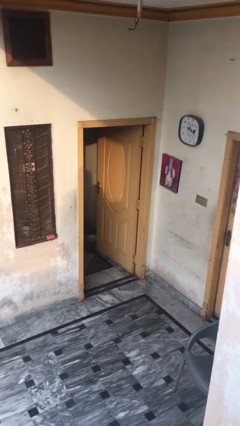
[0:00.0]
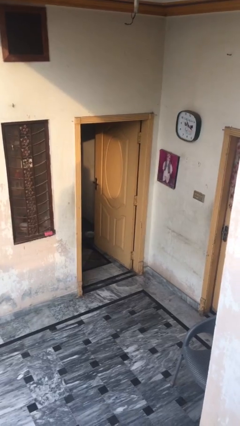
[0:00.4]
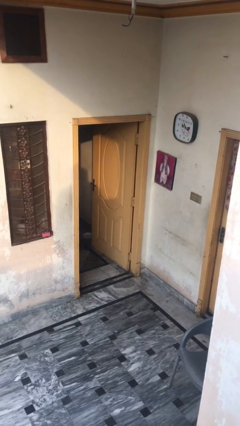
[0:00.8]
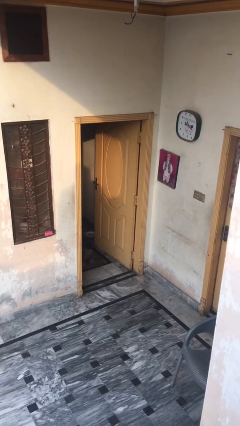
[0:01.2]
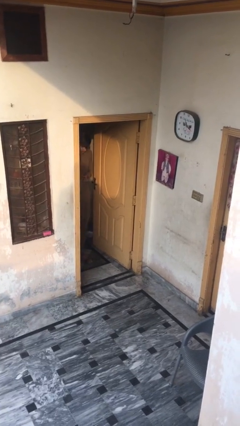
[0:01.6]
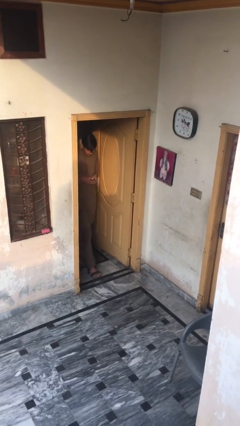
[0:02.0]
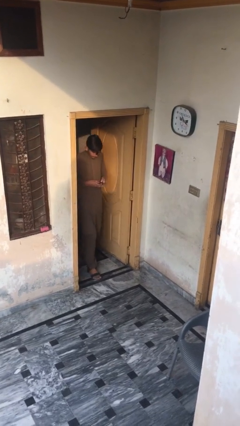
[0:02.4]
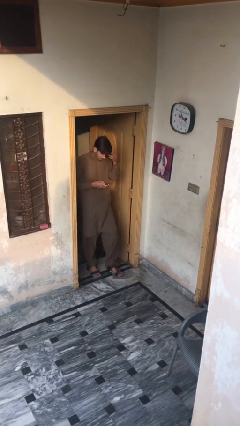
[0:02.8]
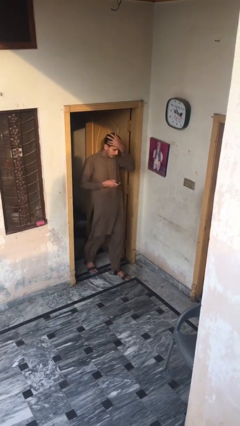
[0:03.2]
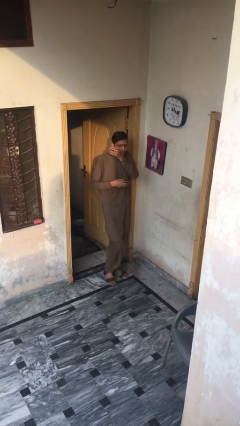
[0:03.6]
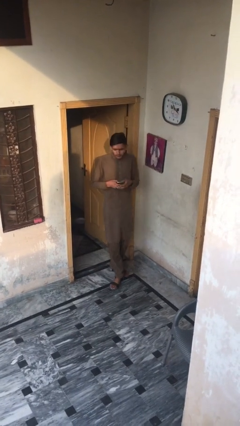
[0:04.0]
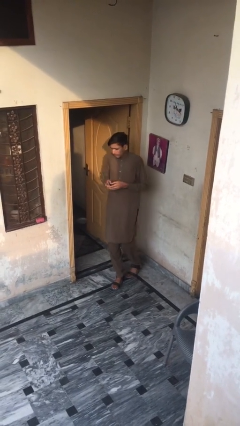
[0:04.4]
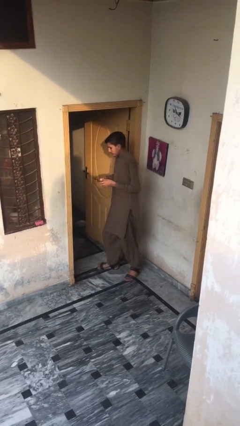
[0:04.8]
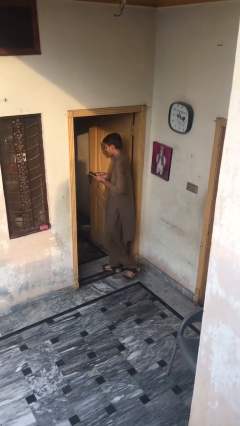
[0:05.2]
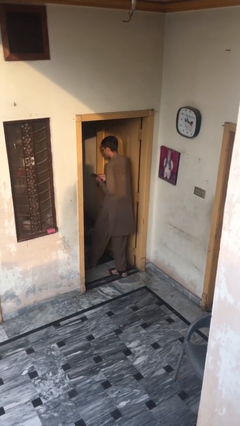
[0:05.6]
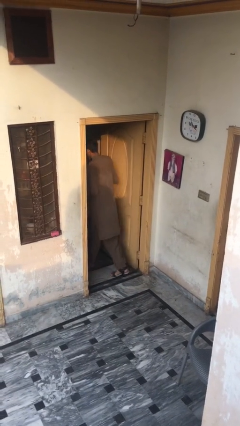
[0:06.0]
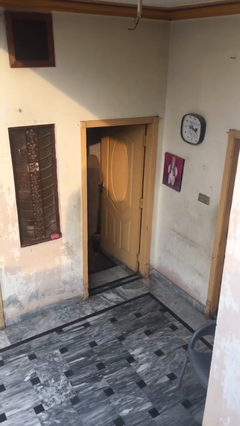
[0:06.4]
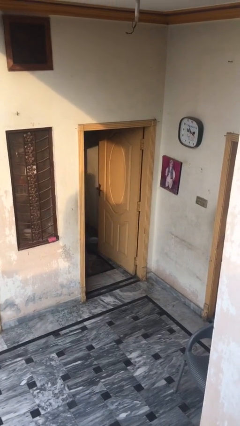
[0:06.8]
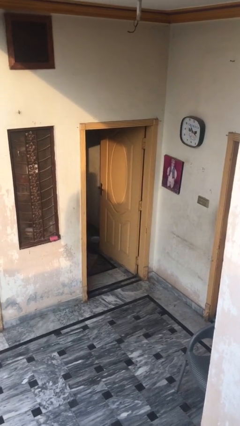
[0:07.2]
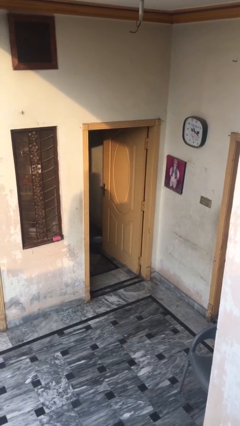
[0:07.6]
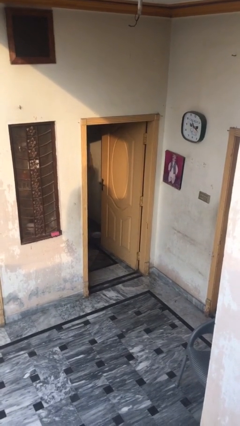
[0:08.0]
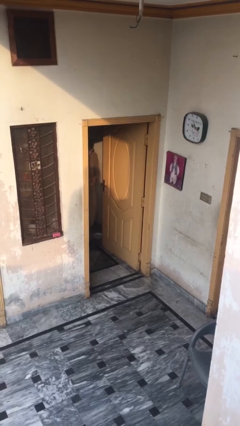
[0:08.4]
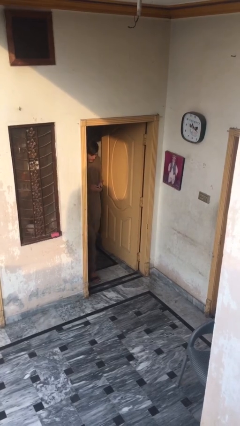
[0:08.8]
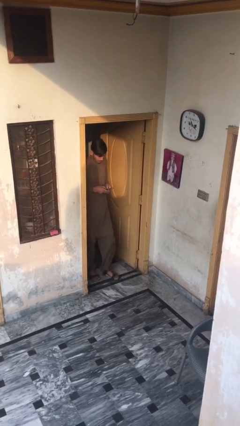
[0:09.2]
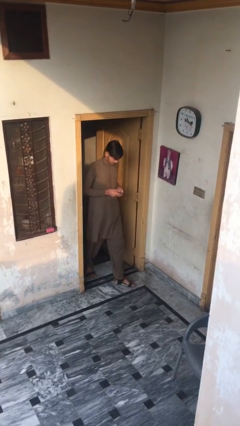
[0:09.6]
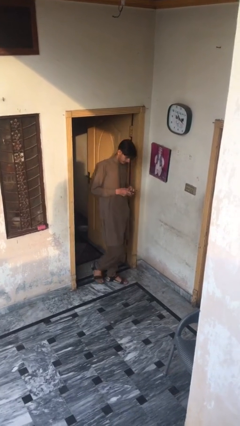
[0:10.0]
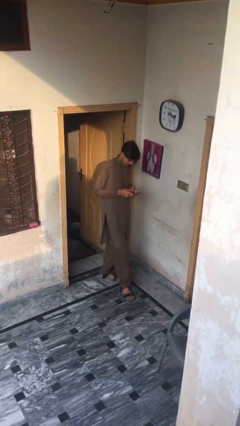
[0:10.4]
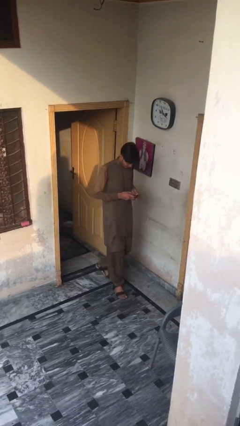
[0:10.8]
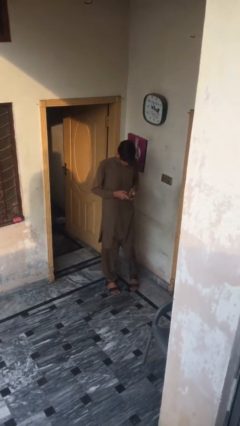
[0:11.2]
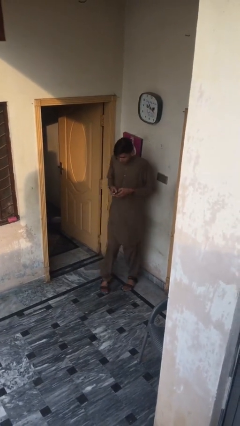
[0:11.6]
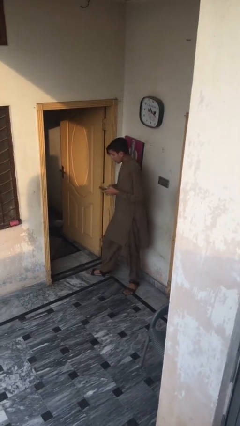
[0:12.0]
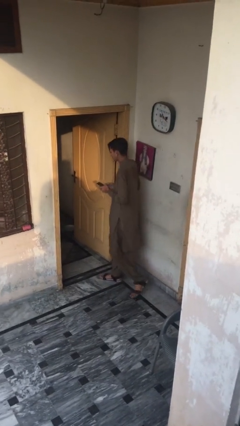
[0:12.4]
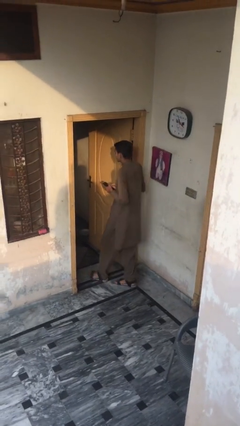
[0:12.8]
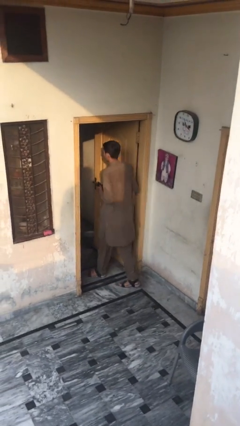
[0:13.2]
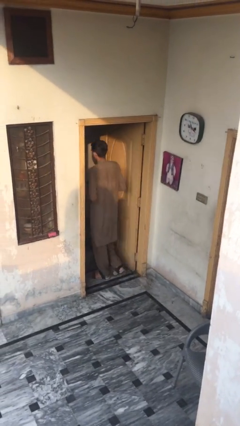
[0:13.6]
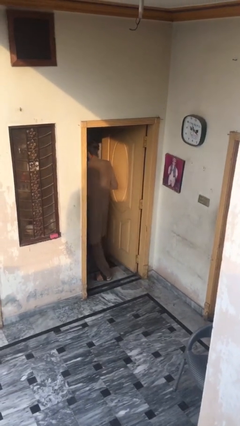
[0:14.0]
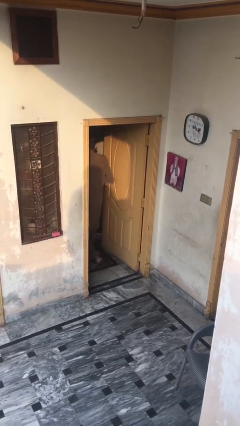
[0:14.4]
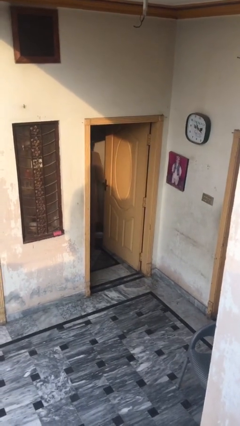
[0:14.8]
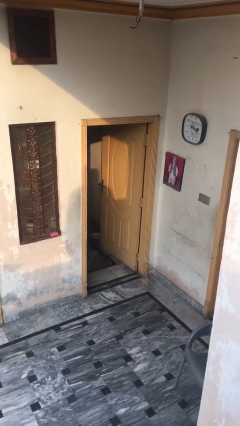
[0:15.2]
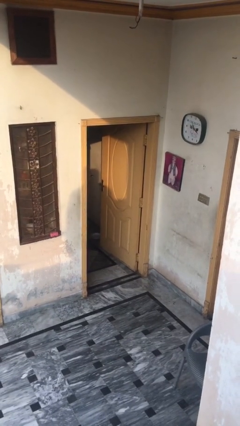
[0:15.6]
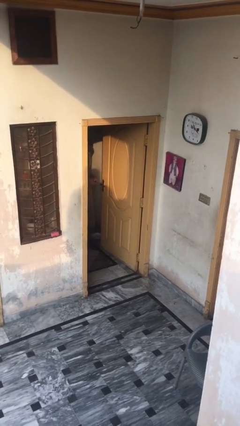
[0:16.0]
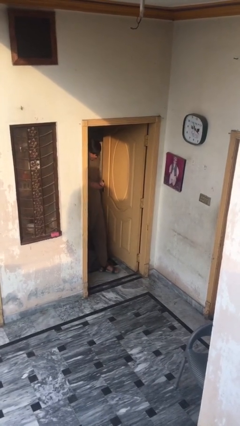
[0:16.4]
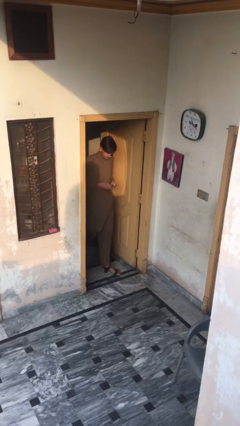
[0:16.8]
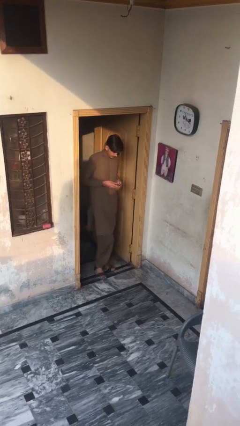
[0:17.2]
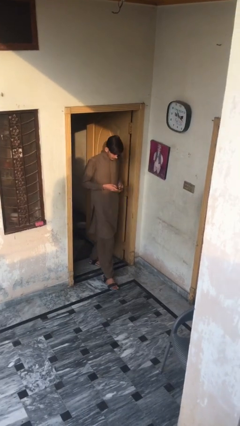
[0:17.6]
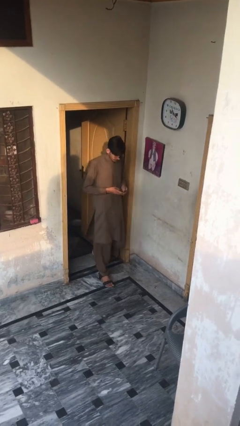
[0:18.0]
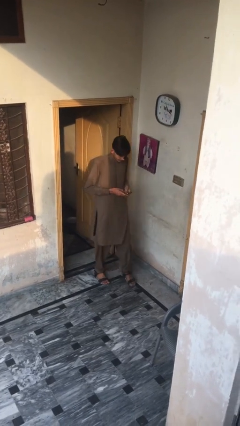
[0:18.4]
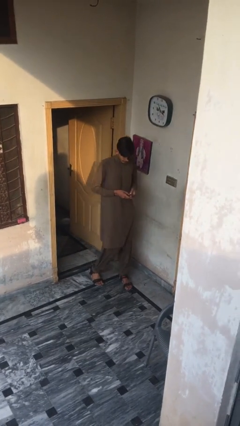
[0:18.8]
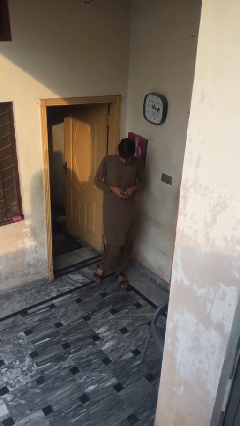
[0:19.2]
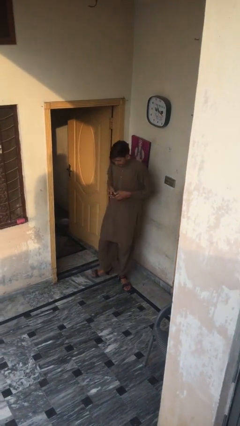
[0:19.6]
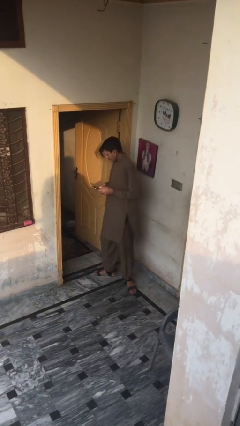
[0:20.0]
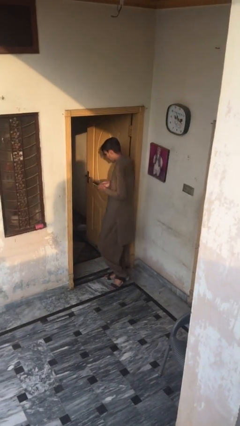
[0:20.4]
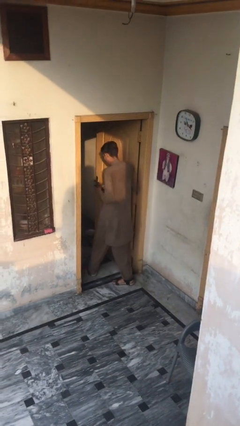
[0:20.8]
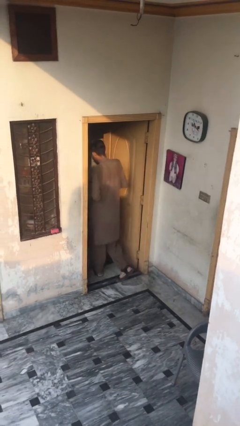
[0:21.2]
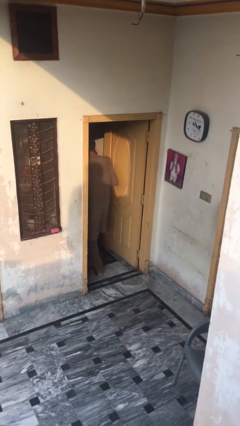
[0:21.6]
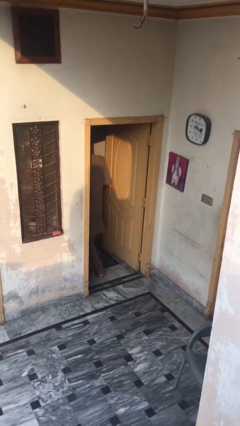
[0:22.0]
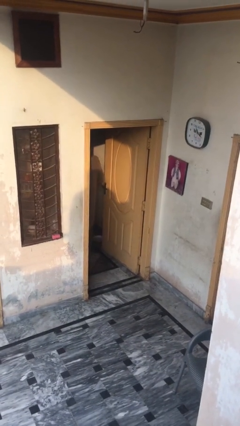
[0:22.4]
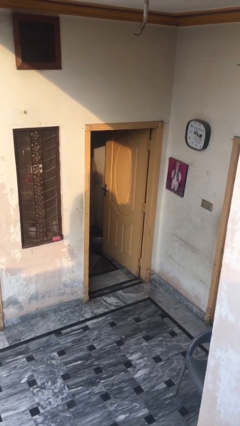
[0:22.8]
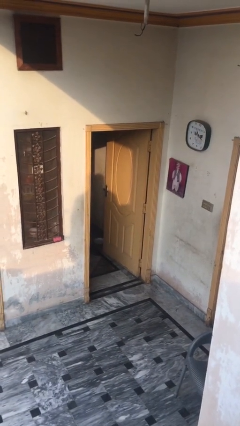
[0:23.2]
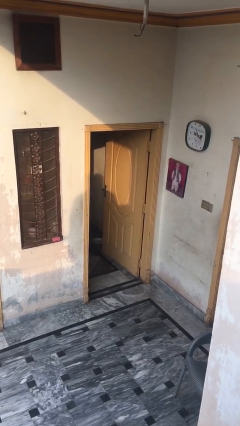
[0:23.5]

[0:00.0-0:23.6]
person texts on phone

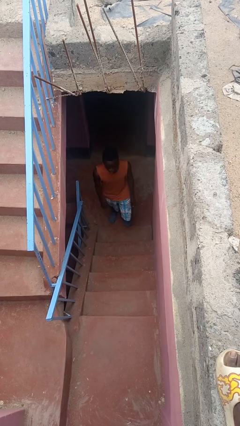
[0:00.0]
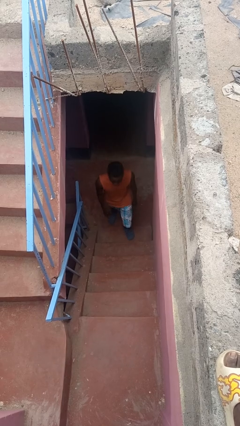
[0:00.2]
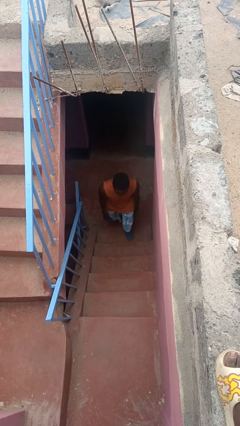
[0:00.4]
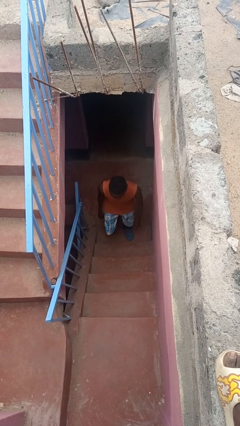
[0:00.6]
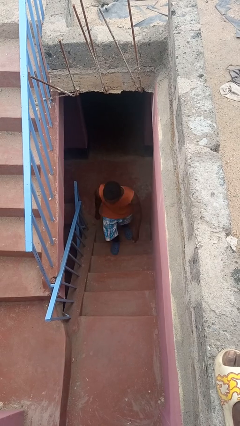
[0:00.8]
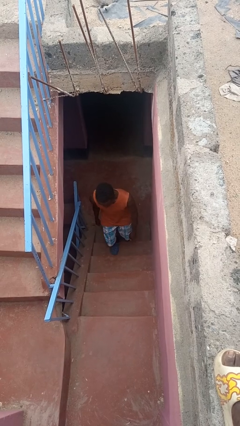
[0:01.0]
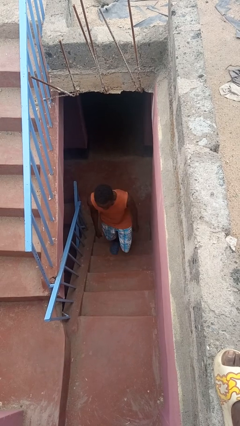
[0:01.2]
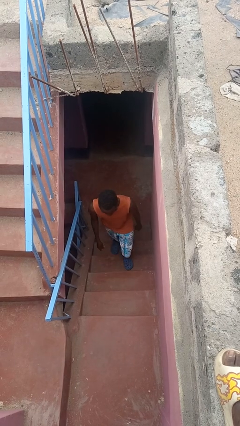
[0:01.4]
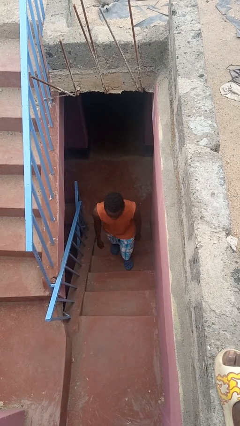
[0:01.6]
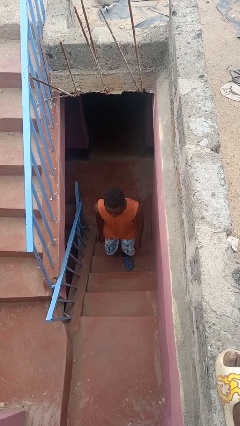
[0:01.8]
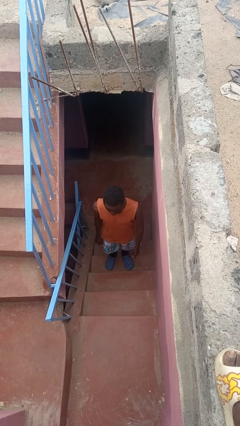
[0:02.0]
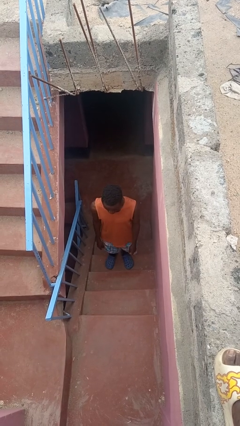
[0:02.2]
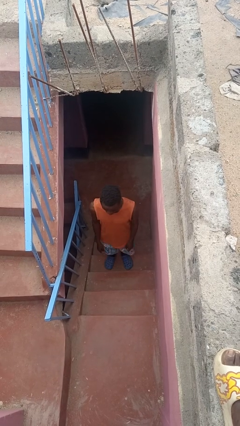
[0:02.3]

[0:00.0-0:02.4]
person climbs up stairs

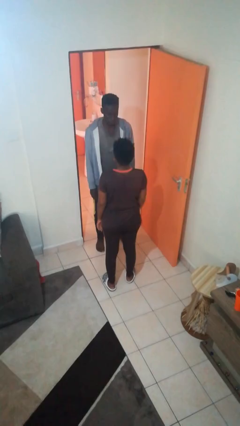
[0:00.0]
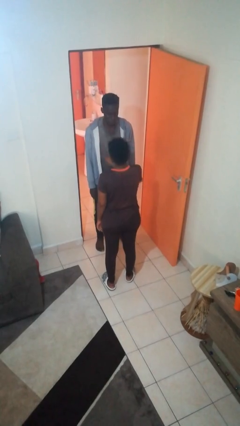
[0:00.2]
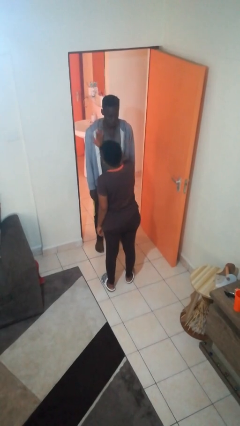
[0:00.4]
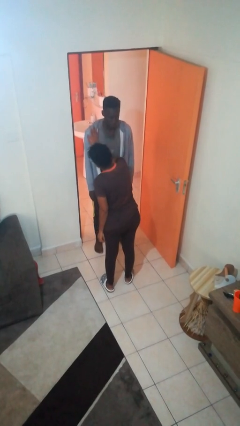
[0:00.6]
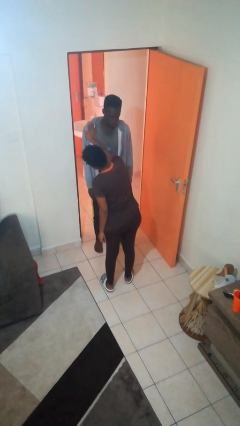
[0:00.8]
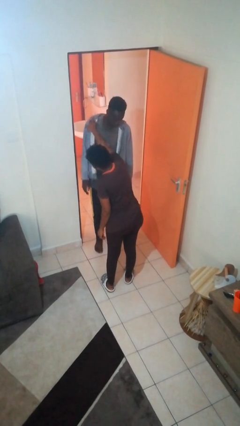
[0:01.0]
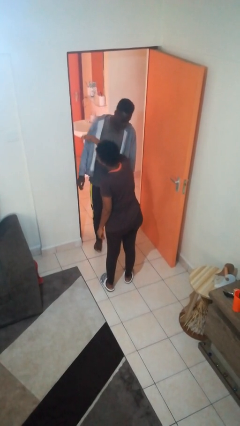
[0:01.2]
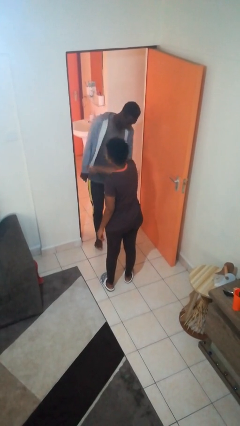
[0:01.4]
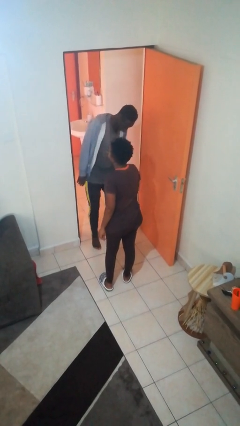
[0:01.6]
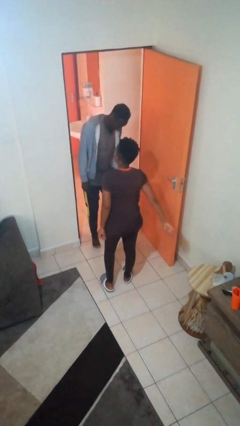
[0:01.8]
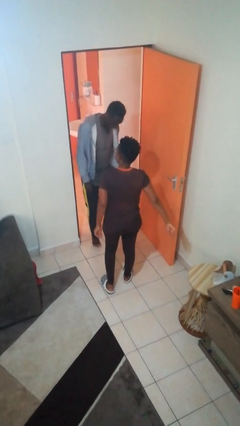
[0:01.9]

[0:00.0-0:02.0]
person shoves person

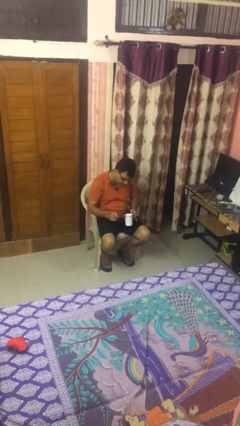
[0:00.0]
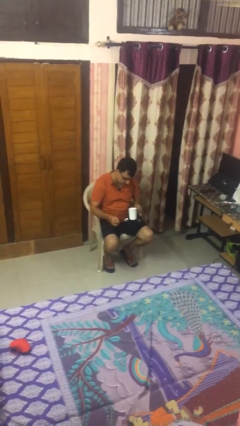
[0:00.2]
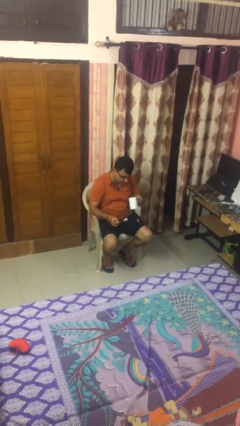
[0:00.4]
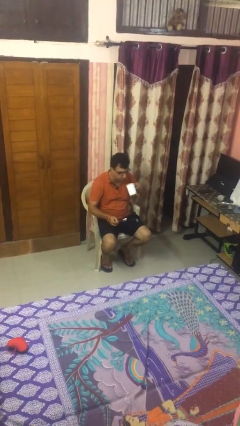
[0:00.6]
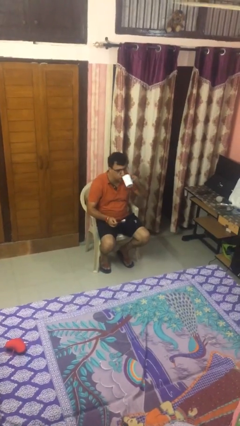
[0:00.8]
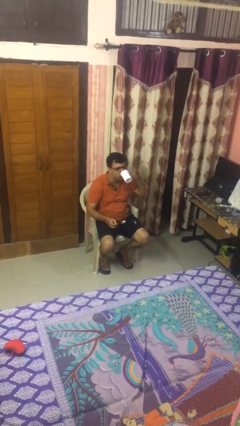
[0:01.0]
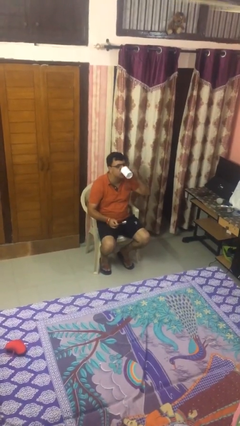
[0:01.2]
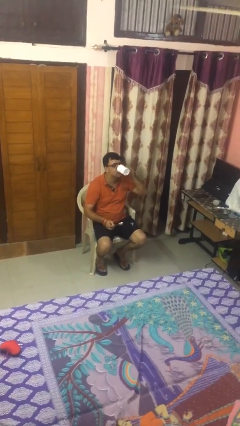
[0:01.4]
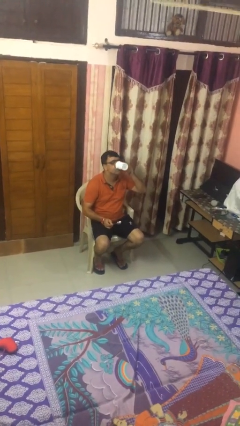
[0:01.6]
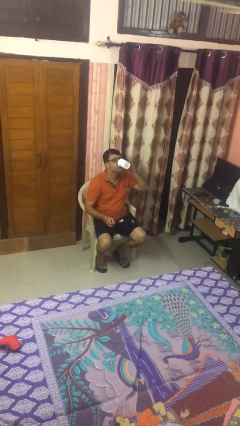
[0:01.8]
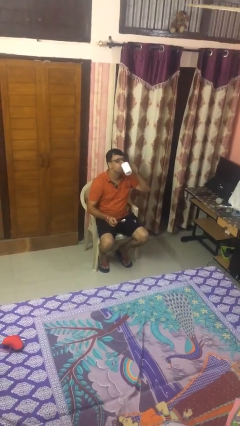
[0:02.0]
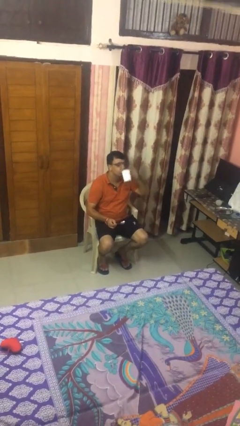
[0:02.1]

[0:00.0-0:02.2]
person drinks from mug
